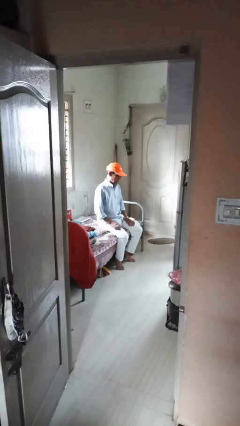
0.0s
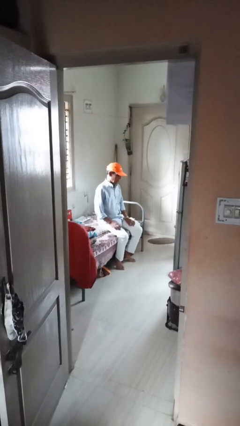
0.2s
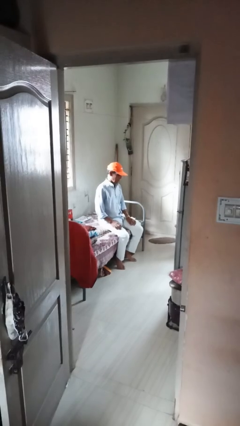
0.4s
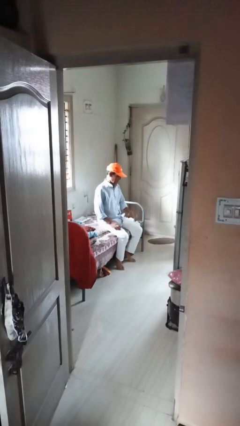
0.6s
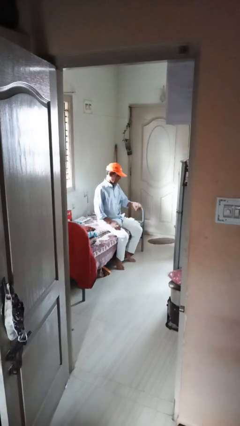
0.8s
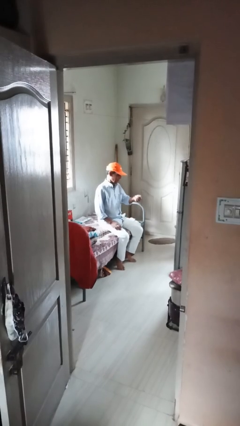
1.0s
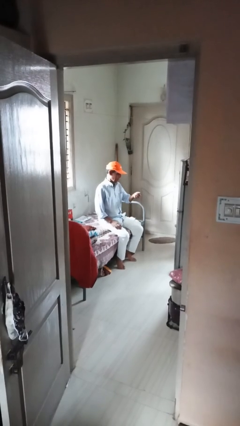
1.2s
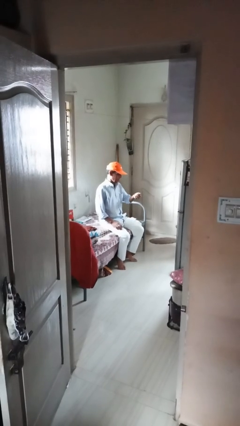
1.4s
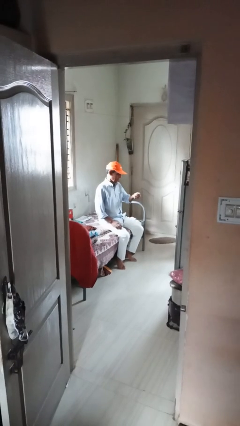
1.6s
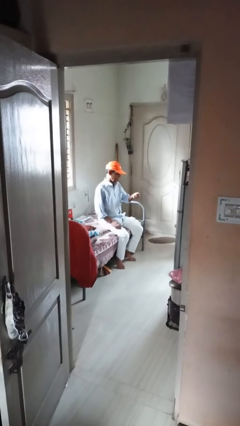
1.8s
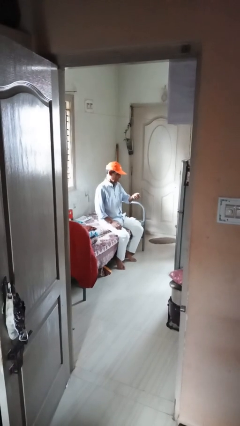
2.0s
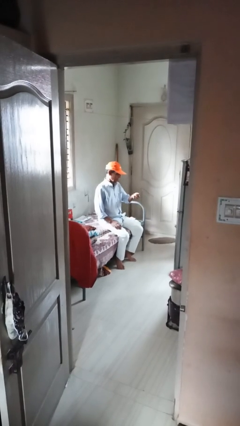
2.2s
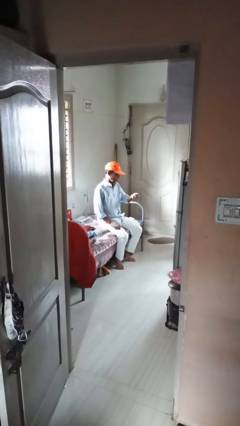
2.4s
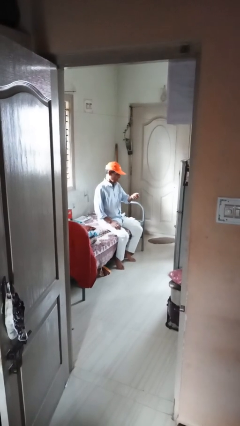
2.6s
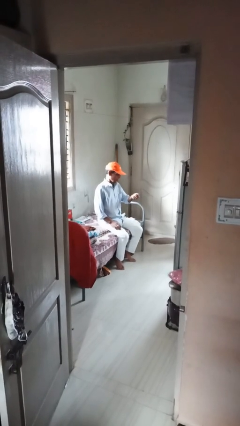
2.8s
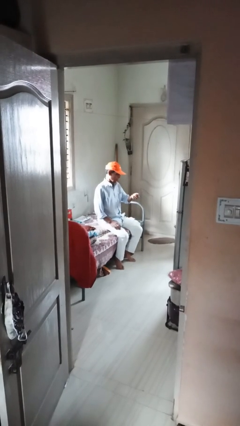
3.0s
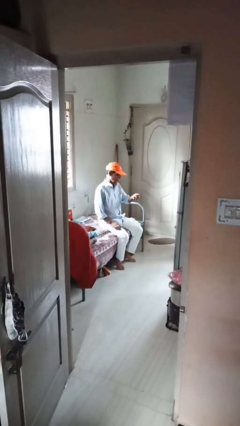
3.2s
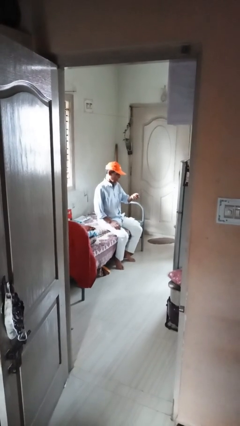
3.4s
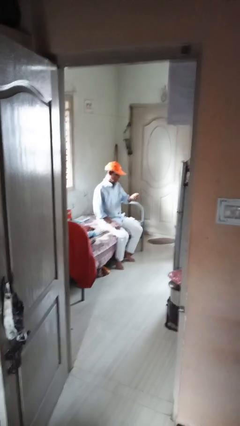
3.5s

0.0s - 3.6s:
person looks at wristwatch

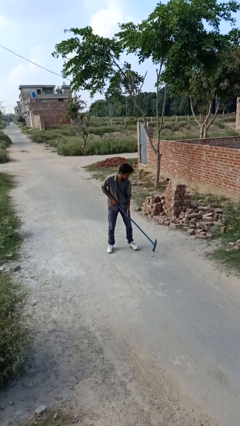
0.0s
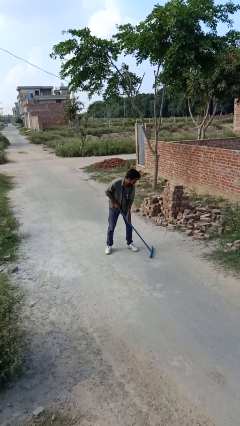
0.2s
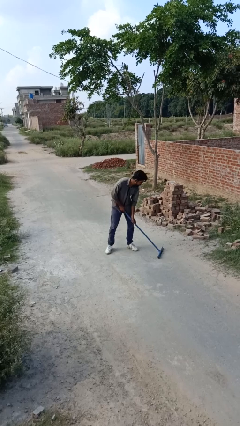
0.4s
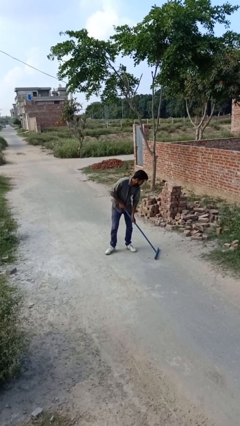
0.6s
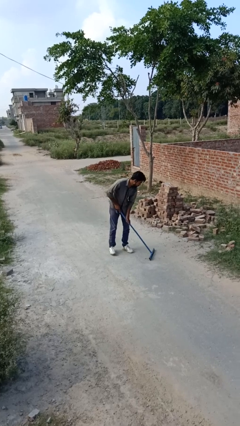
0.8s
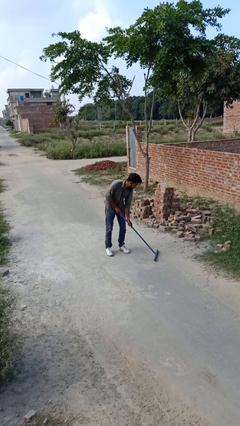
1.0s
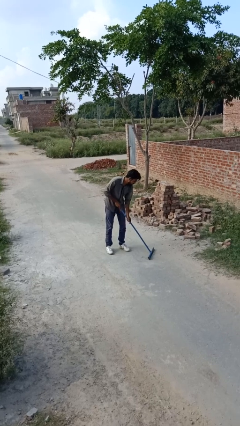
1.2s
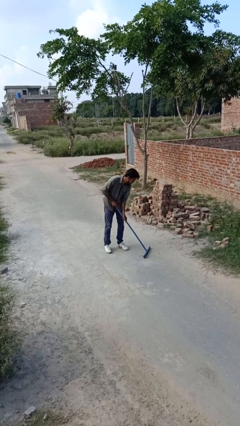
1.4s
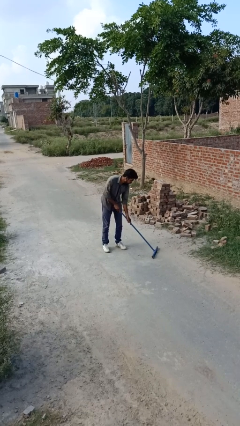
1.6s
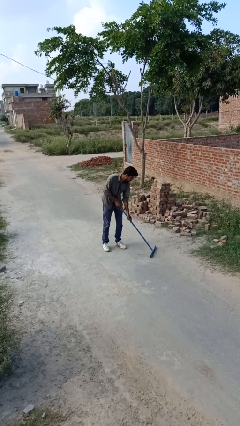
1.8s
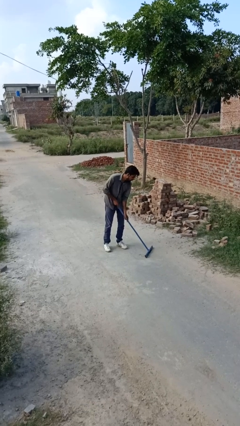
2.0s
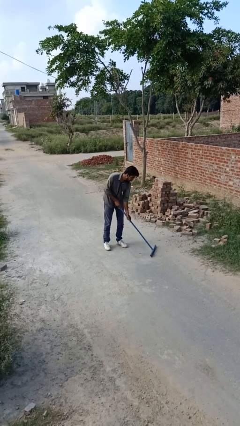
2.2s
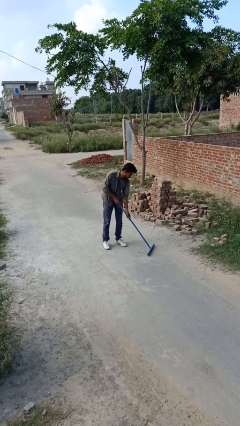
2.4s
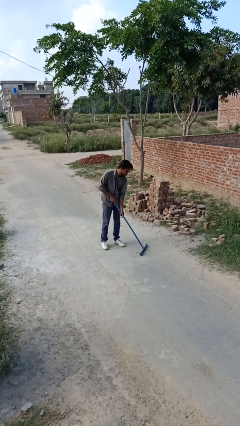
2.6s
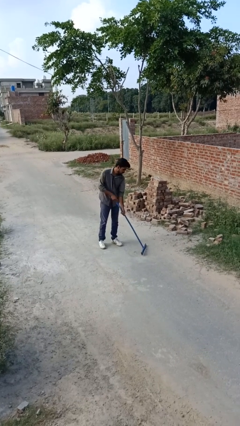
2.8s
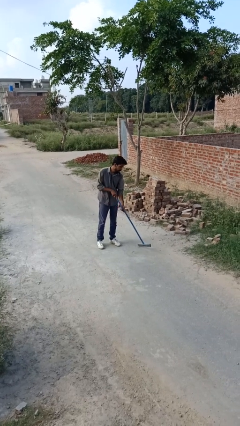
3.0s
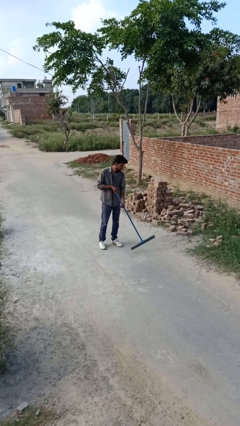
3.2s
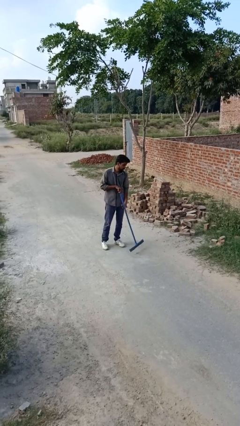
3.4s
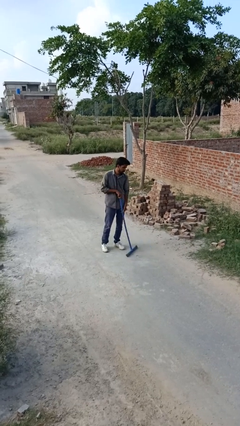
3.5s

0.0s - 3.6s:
person sweeps floor

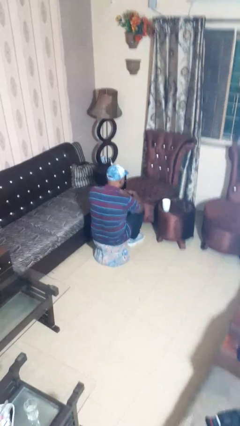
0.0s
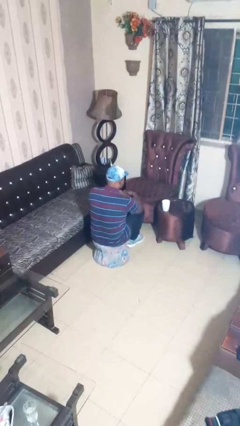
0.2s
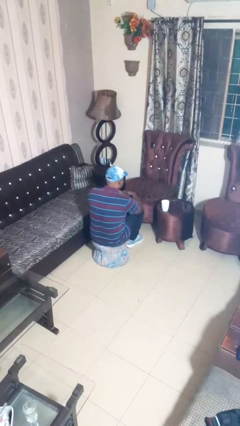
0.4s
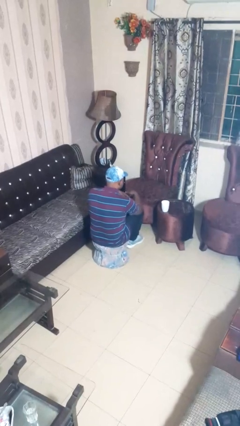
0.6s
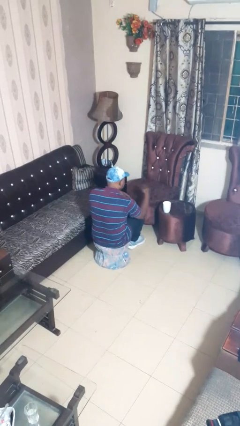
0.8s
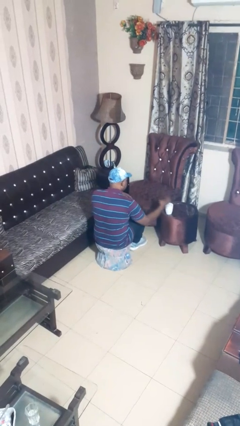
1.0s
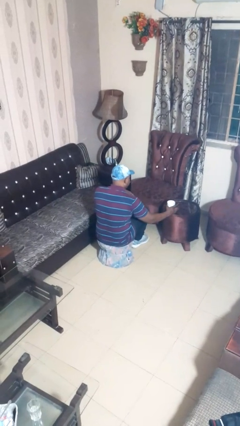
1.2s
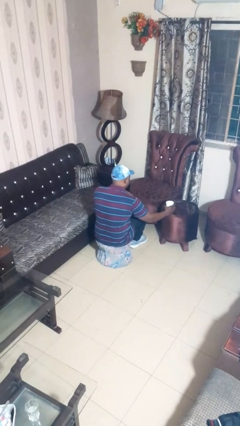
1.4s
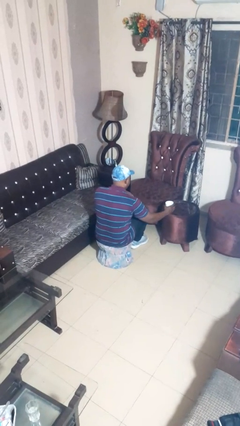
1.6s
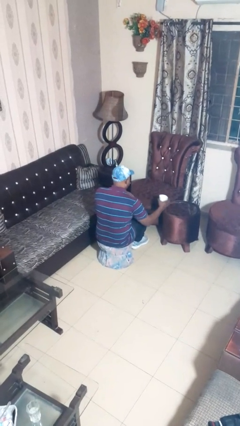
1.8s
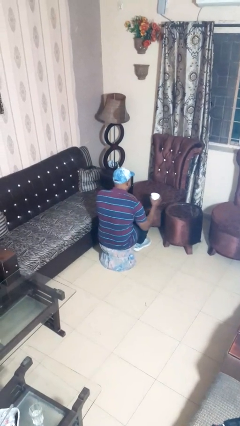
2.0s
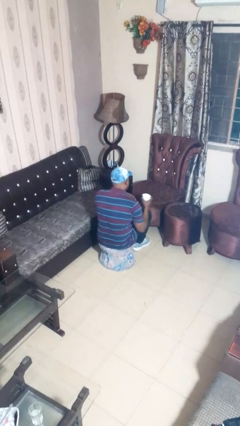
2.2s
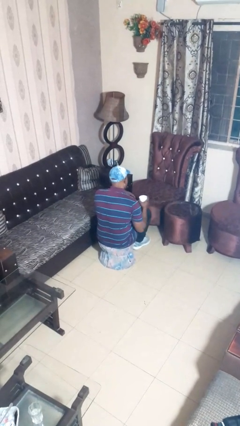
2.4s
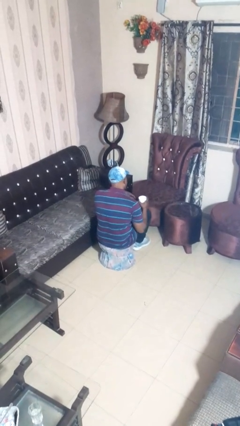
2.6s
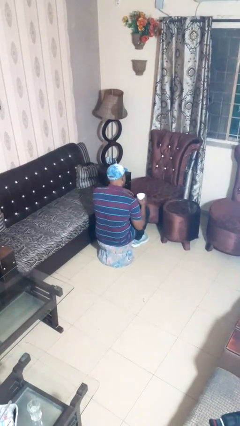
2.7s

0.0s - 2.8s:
person picks up object from table

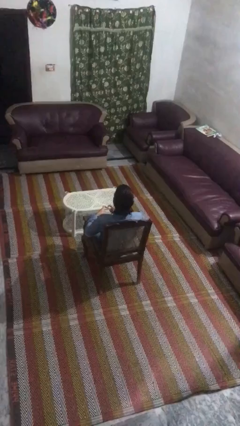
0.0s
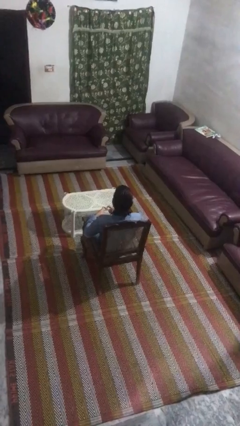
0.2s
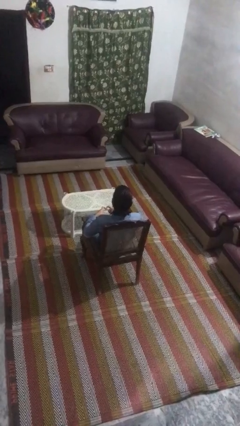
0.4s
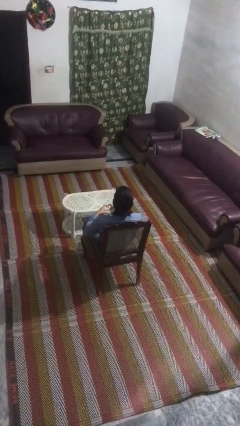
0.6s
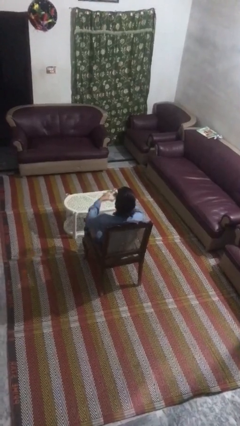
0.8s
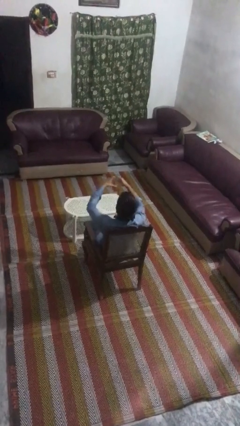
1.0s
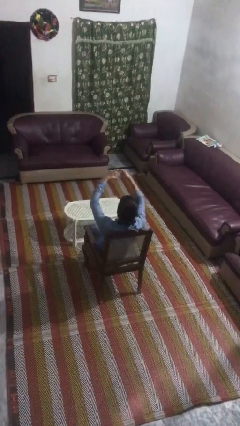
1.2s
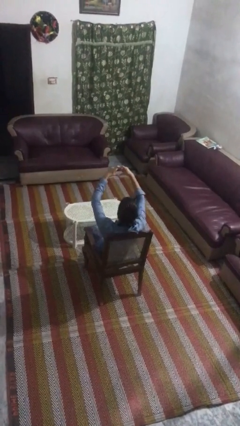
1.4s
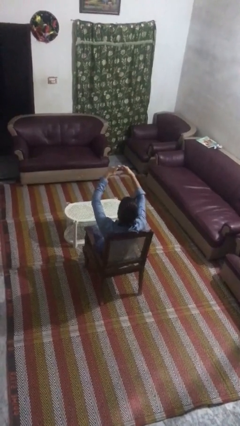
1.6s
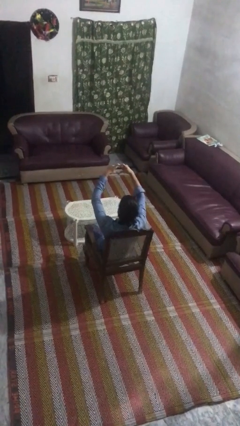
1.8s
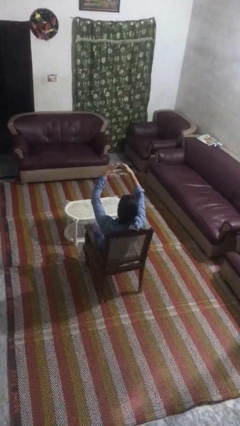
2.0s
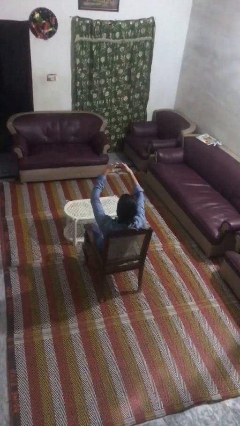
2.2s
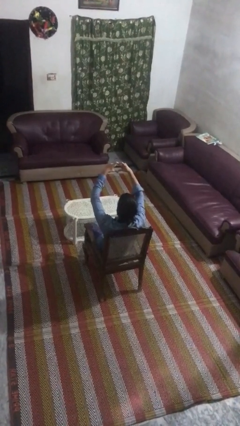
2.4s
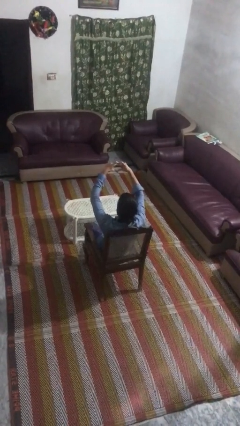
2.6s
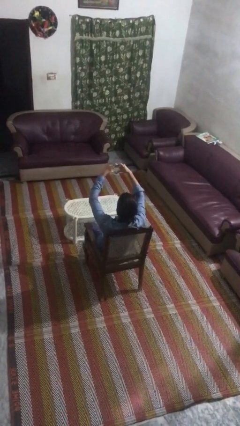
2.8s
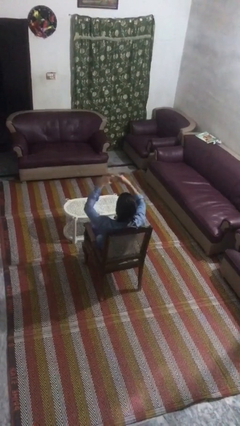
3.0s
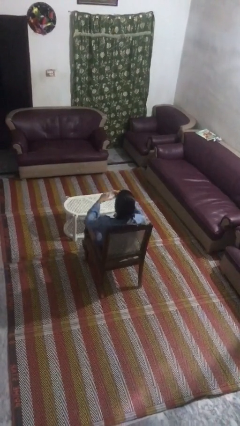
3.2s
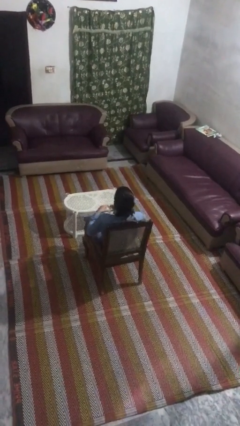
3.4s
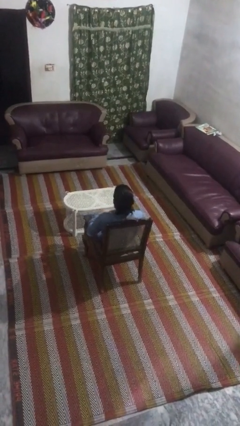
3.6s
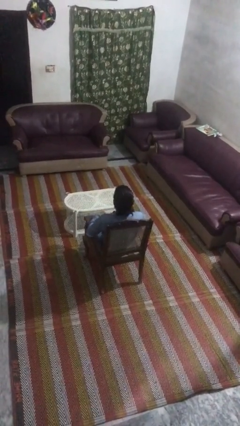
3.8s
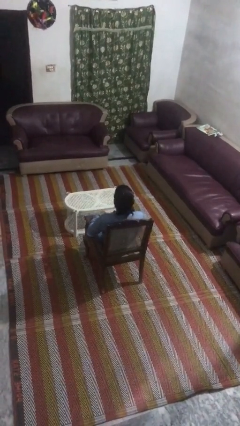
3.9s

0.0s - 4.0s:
person gestures heart

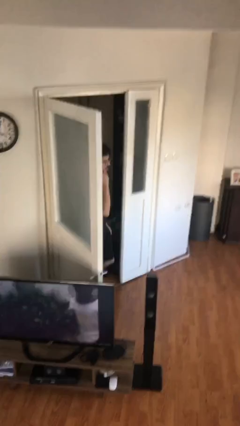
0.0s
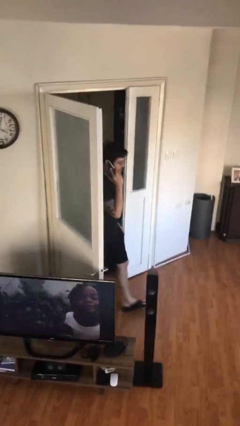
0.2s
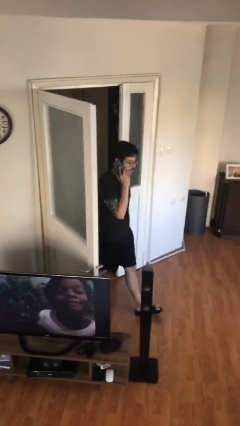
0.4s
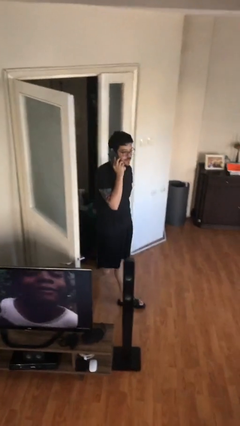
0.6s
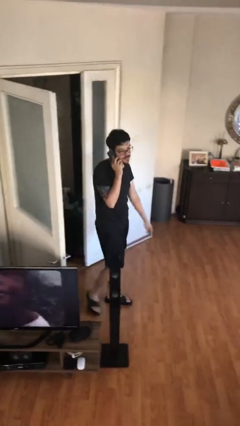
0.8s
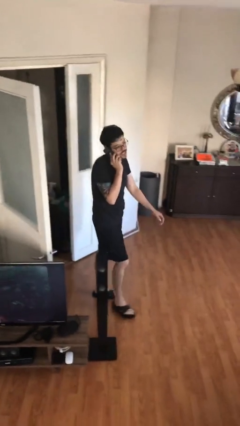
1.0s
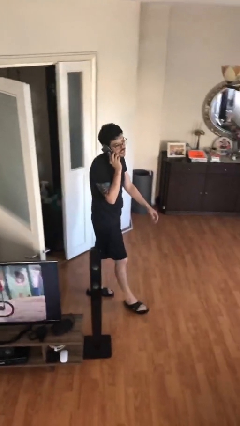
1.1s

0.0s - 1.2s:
person enters scene through structure

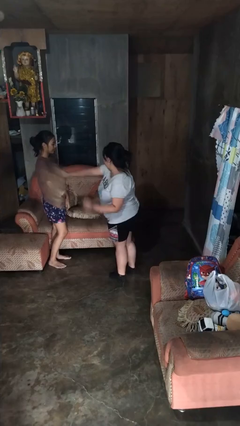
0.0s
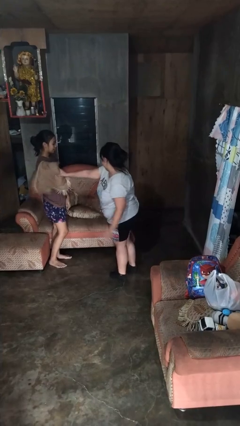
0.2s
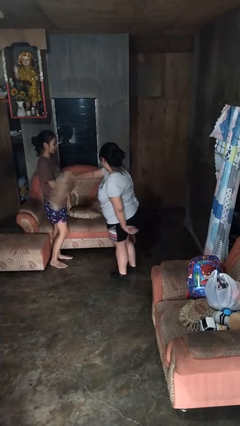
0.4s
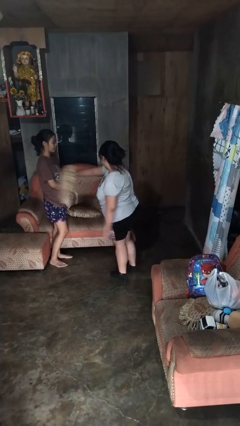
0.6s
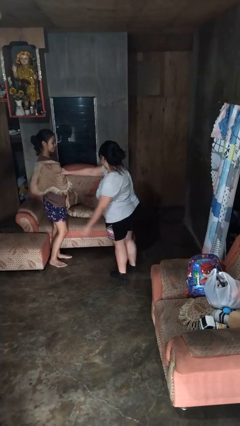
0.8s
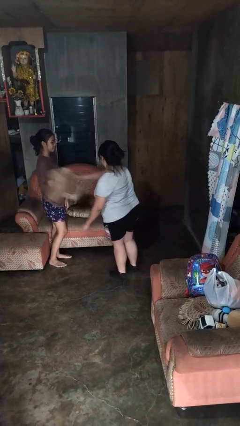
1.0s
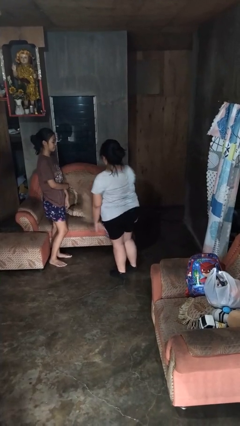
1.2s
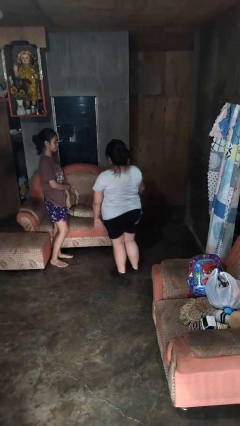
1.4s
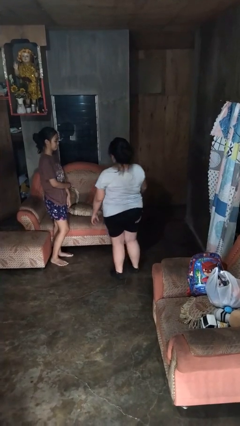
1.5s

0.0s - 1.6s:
person hits person with pillow

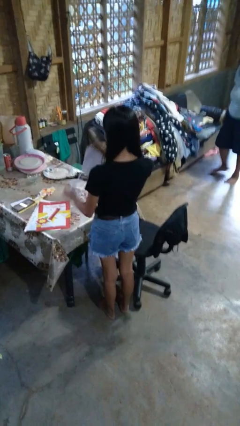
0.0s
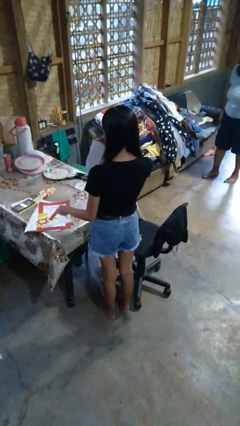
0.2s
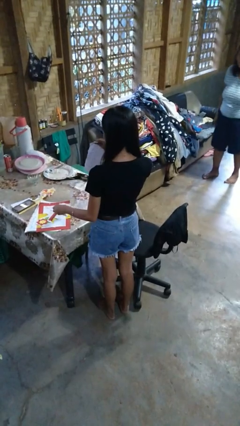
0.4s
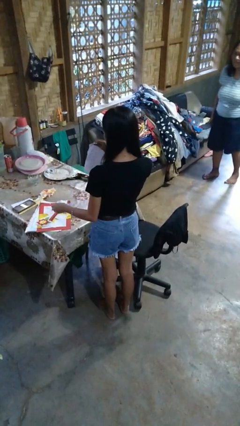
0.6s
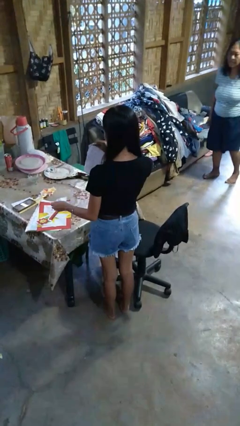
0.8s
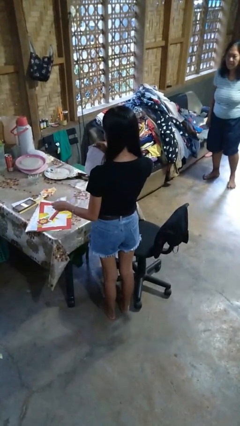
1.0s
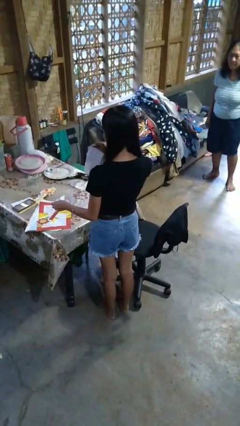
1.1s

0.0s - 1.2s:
person tears paper
